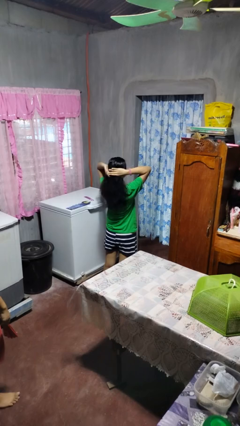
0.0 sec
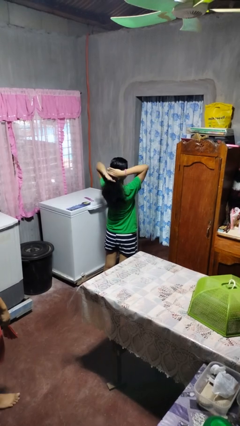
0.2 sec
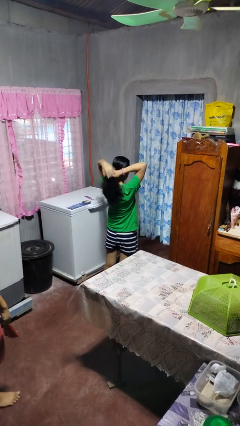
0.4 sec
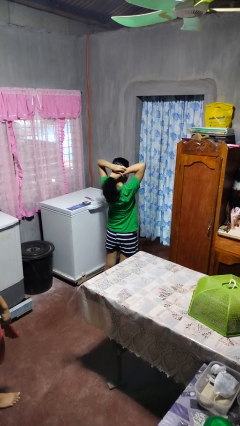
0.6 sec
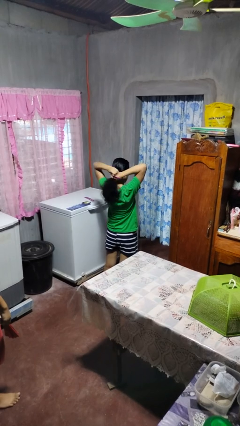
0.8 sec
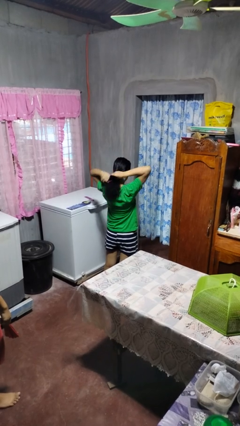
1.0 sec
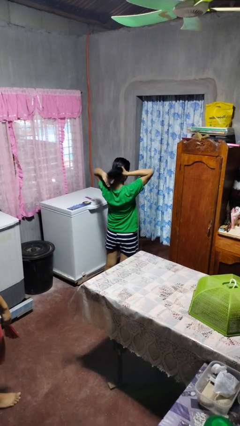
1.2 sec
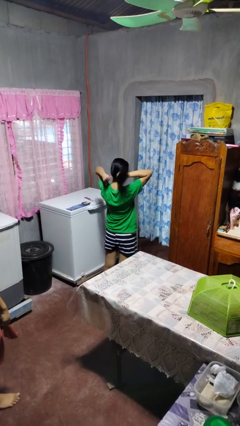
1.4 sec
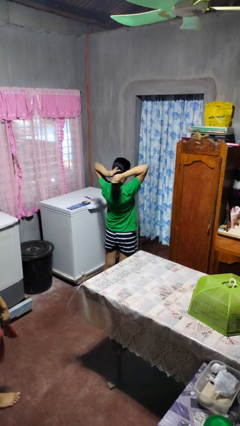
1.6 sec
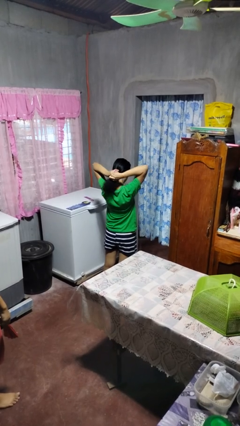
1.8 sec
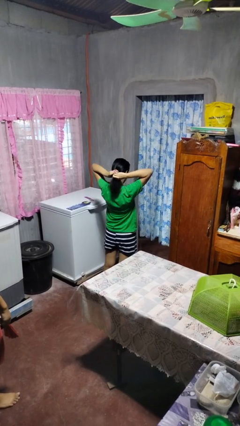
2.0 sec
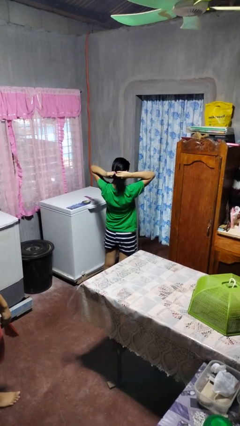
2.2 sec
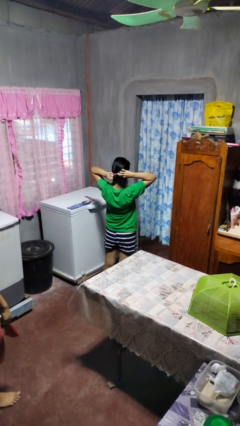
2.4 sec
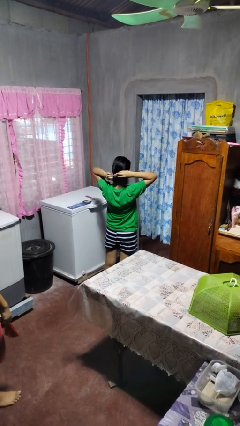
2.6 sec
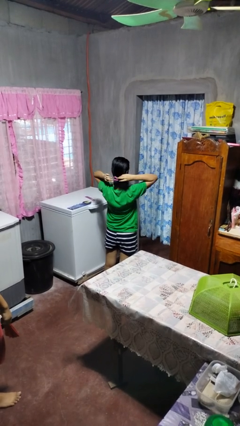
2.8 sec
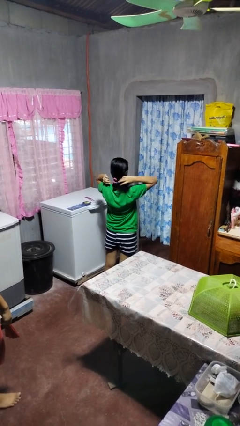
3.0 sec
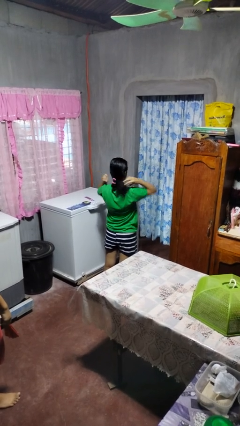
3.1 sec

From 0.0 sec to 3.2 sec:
person puts hair in ponytail

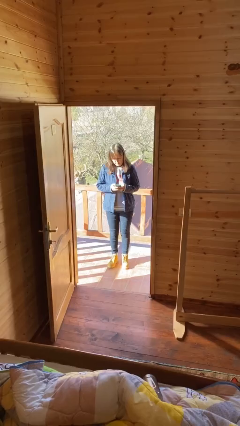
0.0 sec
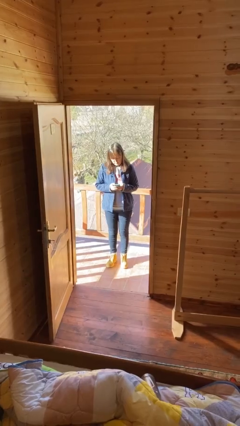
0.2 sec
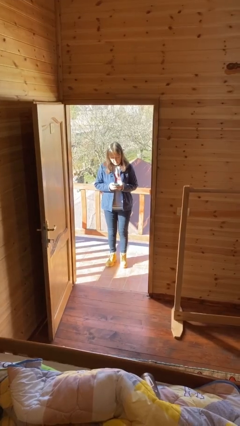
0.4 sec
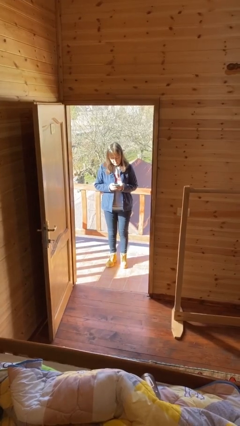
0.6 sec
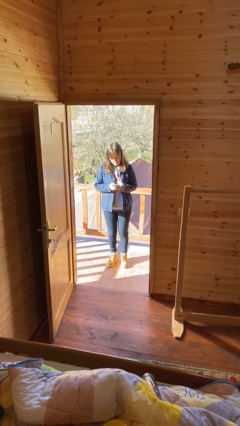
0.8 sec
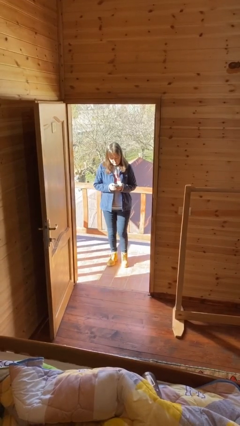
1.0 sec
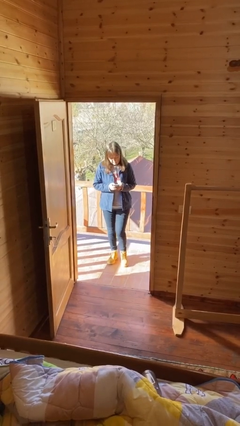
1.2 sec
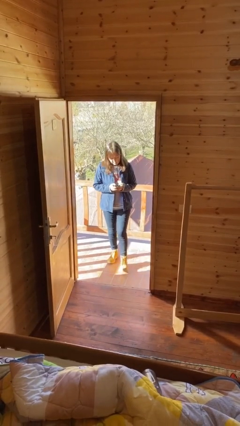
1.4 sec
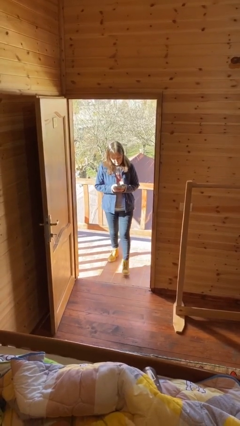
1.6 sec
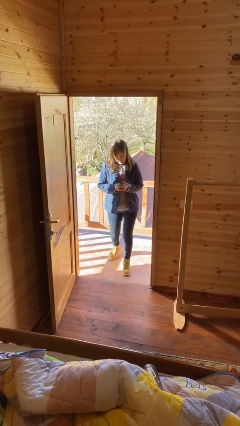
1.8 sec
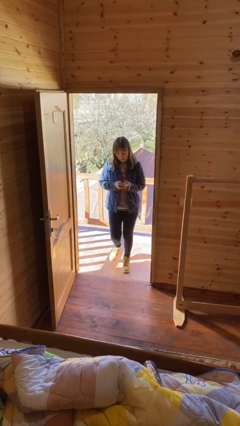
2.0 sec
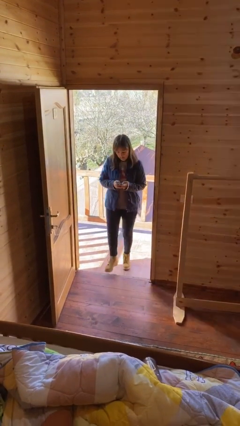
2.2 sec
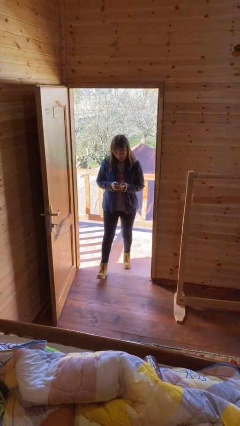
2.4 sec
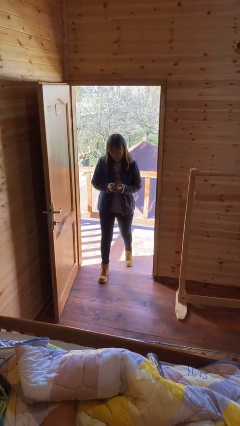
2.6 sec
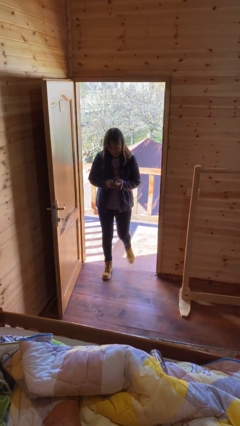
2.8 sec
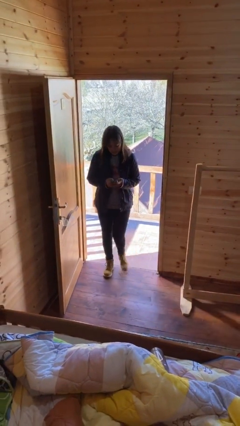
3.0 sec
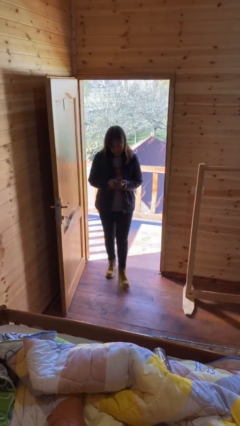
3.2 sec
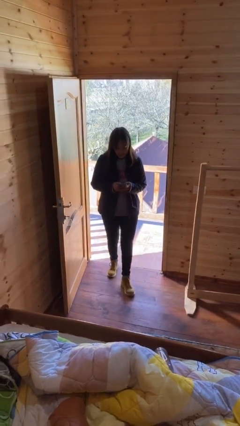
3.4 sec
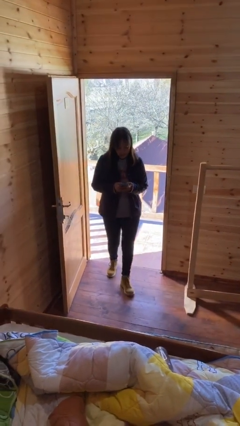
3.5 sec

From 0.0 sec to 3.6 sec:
person enters scene through structure

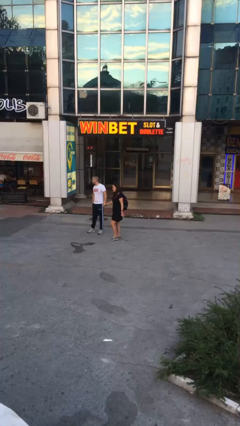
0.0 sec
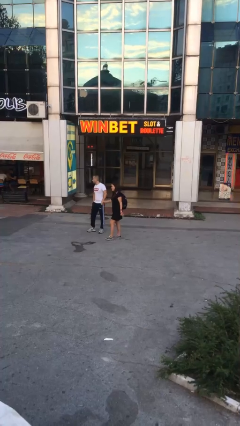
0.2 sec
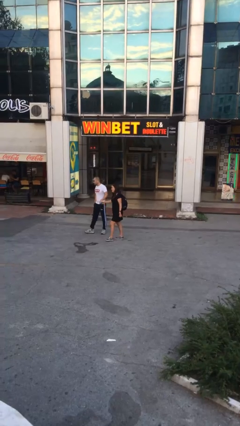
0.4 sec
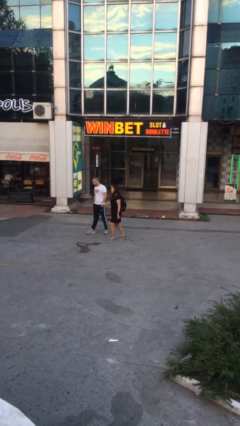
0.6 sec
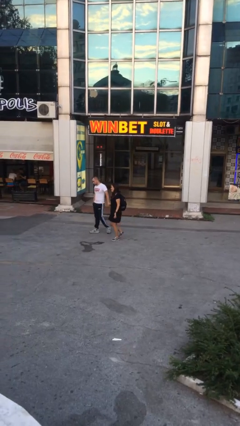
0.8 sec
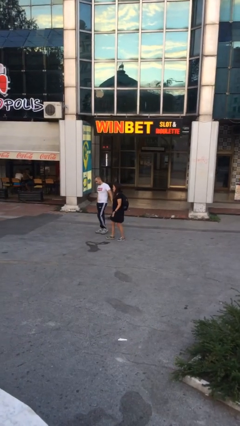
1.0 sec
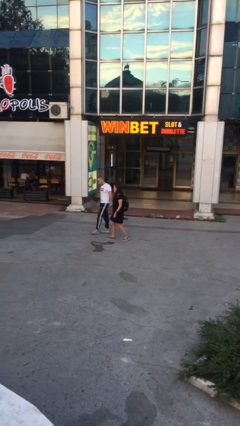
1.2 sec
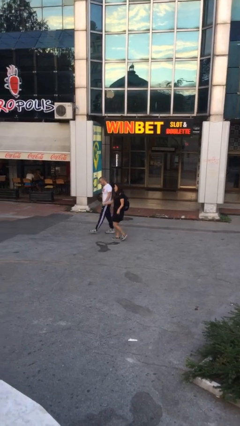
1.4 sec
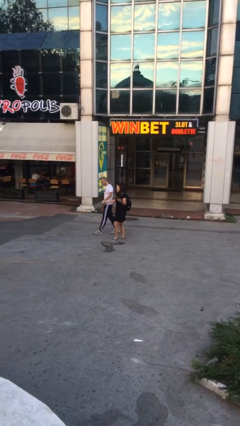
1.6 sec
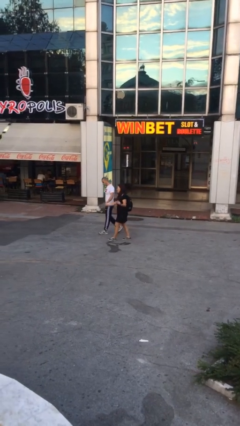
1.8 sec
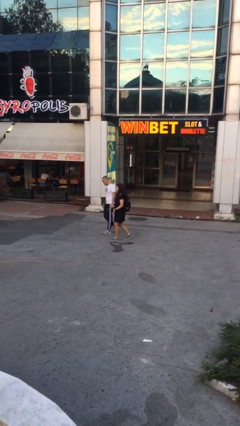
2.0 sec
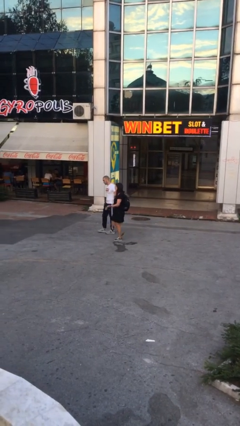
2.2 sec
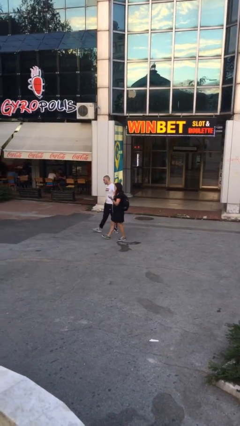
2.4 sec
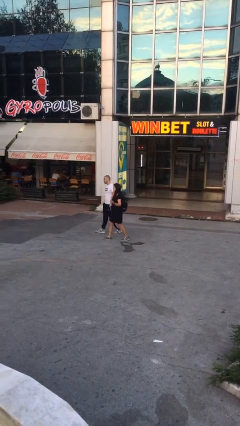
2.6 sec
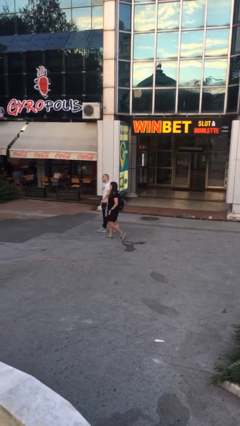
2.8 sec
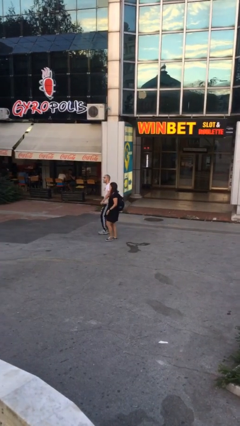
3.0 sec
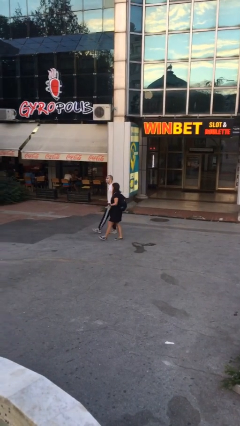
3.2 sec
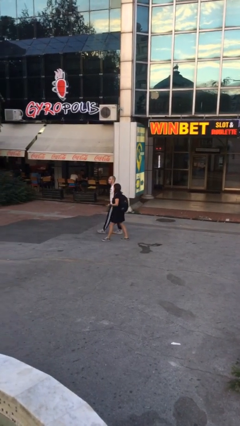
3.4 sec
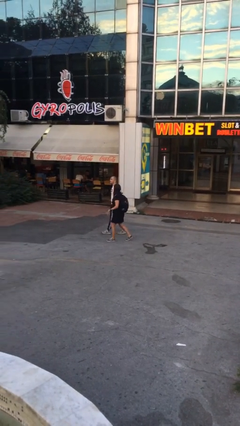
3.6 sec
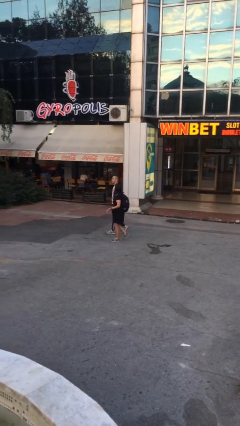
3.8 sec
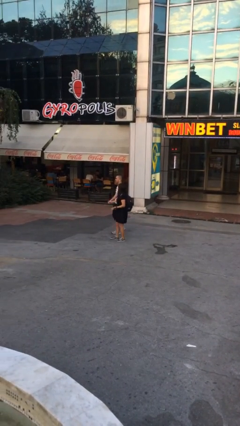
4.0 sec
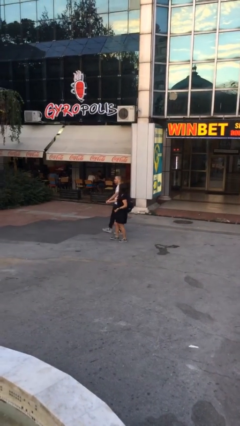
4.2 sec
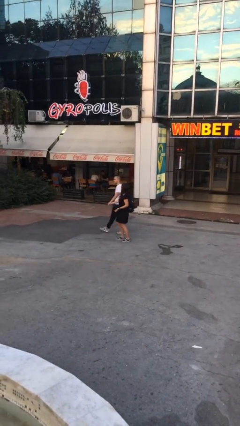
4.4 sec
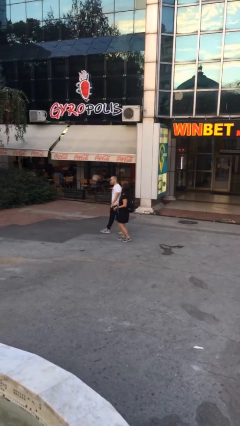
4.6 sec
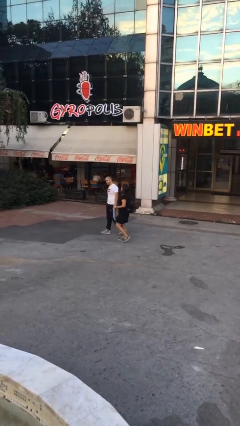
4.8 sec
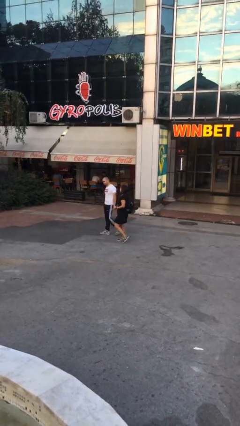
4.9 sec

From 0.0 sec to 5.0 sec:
person holds hand

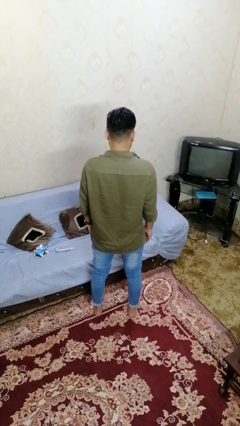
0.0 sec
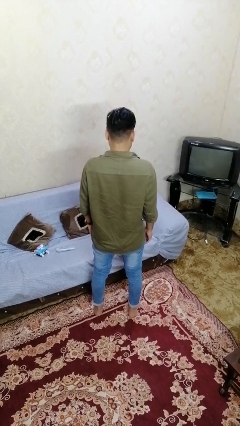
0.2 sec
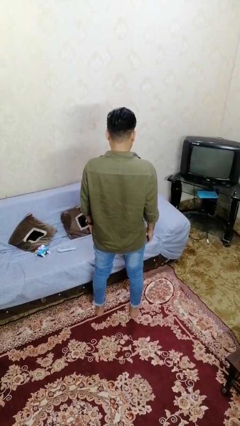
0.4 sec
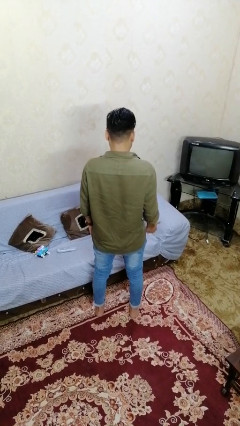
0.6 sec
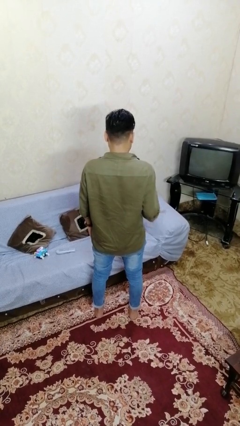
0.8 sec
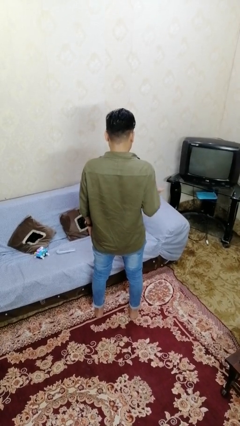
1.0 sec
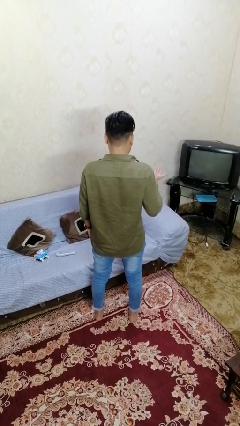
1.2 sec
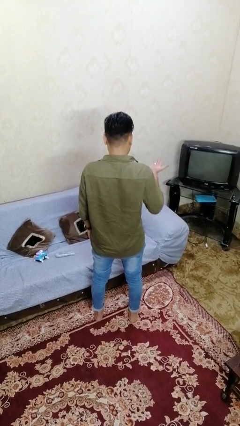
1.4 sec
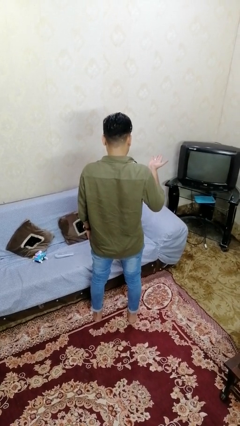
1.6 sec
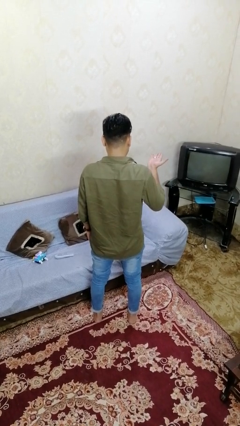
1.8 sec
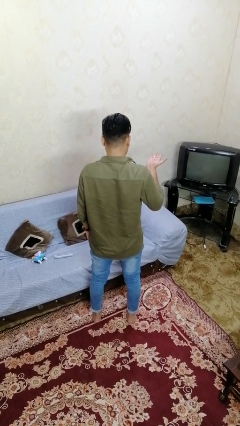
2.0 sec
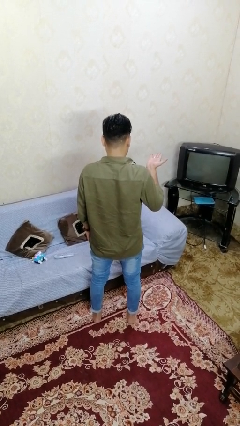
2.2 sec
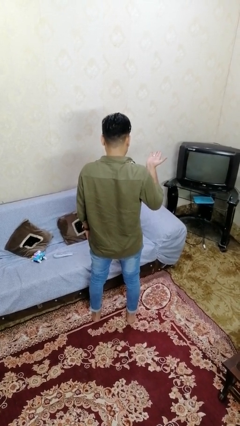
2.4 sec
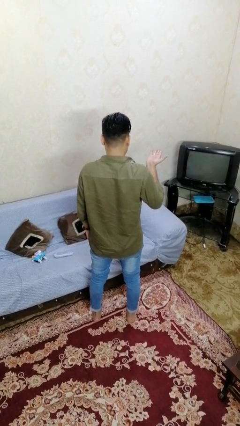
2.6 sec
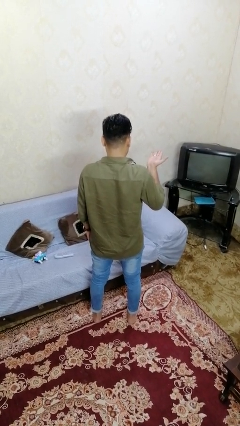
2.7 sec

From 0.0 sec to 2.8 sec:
person gestures swipe up

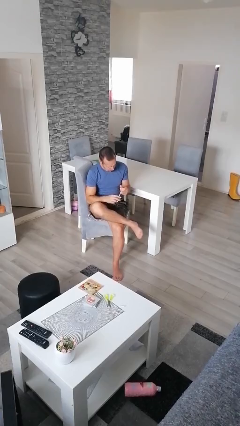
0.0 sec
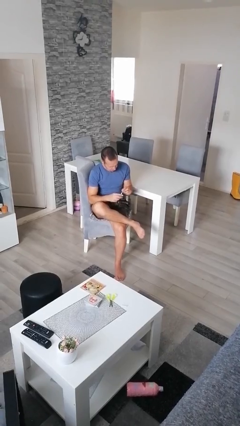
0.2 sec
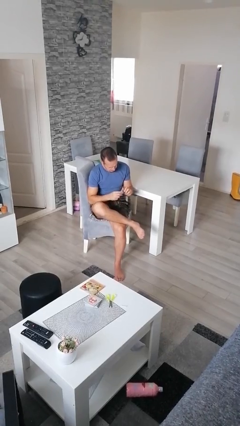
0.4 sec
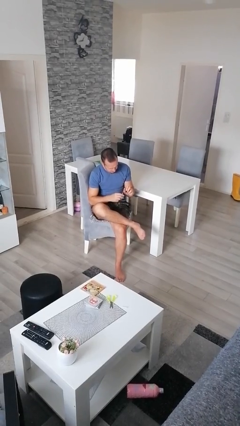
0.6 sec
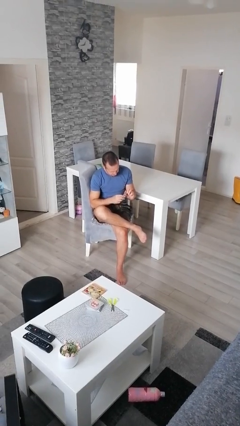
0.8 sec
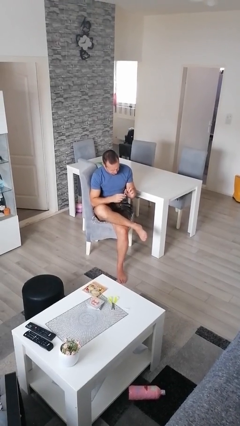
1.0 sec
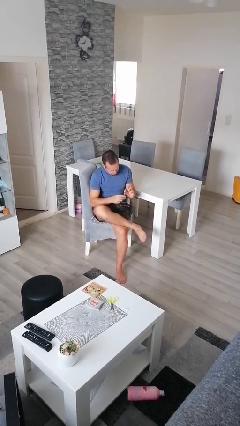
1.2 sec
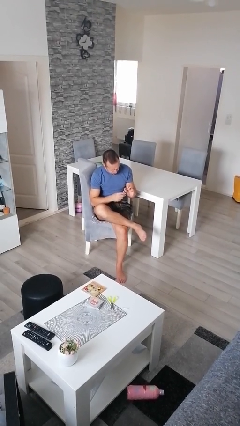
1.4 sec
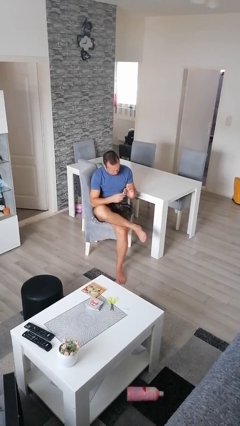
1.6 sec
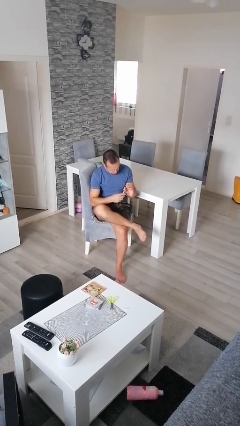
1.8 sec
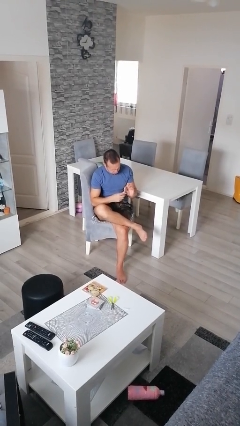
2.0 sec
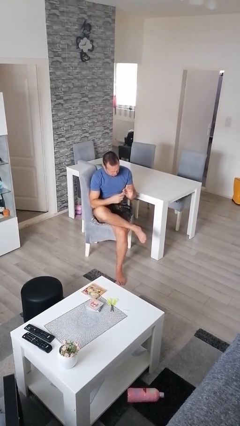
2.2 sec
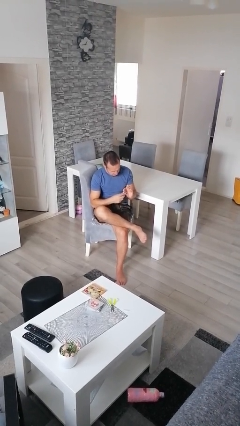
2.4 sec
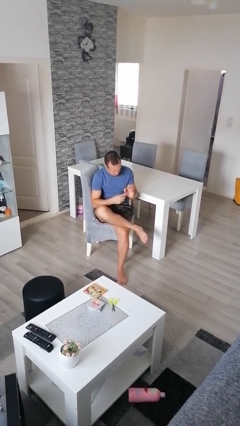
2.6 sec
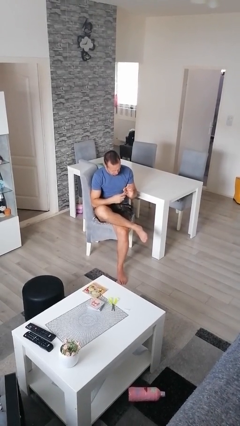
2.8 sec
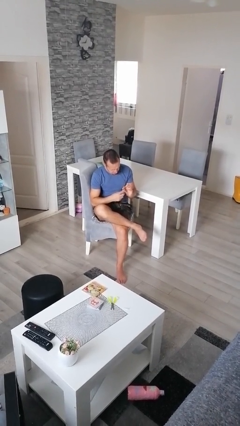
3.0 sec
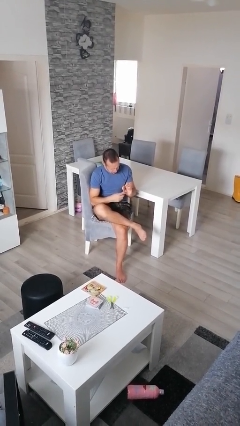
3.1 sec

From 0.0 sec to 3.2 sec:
person files fingernails

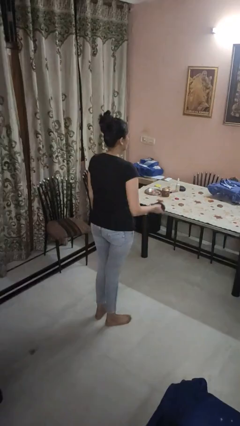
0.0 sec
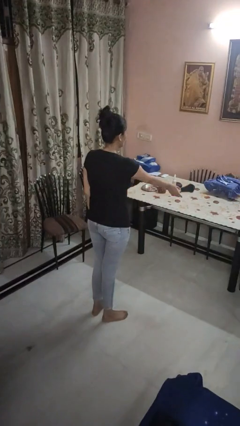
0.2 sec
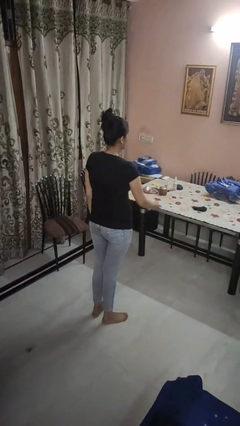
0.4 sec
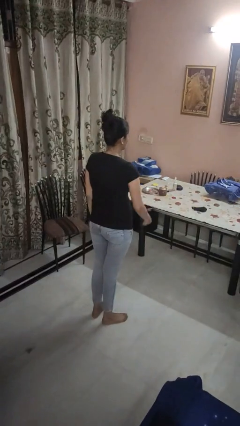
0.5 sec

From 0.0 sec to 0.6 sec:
person throws object on table
